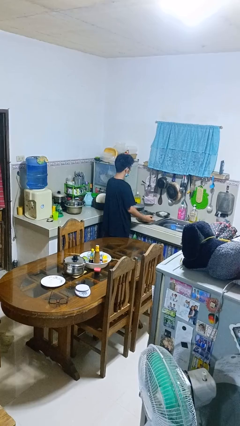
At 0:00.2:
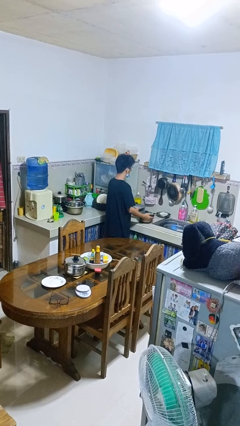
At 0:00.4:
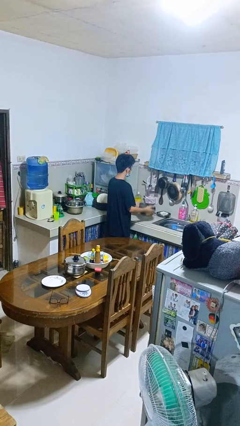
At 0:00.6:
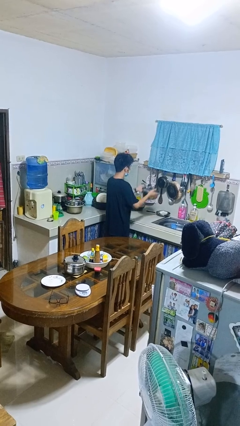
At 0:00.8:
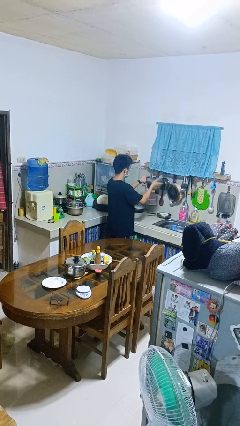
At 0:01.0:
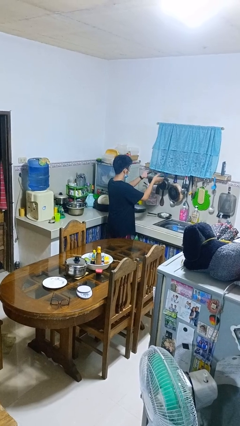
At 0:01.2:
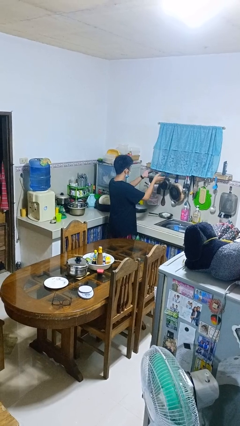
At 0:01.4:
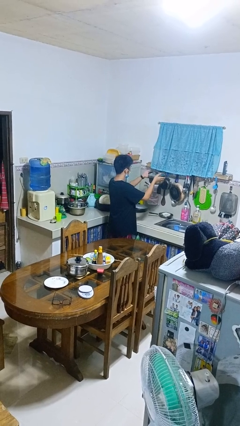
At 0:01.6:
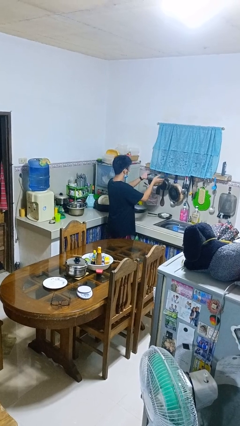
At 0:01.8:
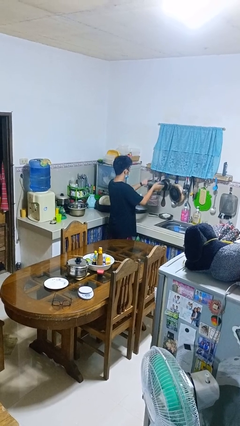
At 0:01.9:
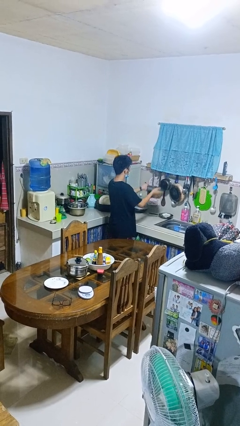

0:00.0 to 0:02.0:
person picks up object from countertop

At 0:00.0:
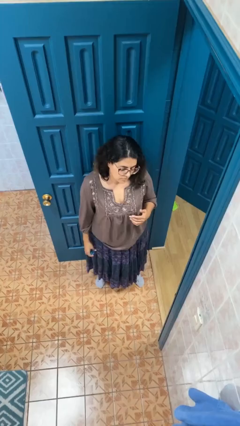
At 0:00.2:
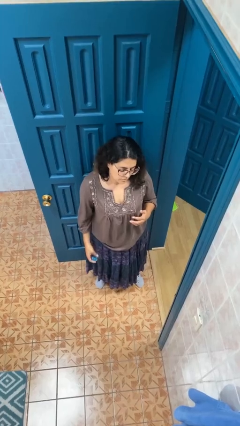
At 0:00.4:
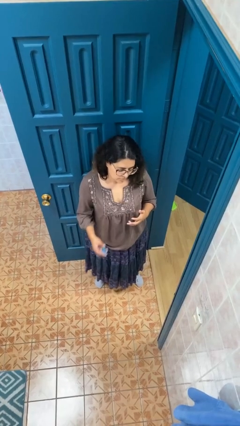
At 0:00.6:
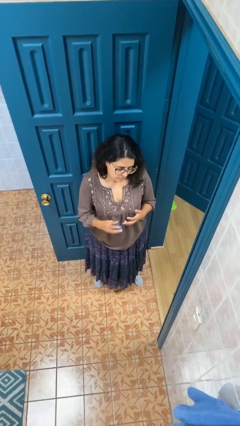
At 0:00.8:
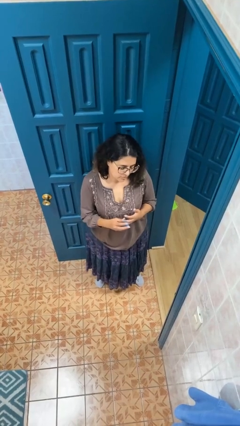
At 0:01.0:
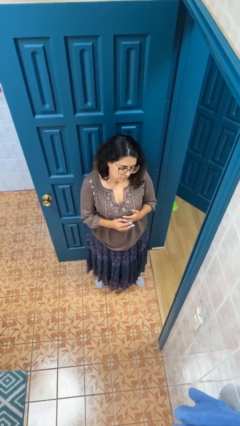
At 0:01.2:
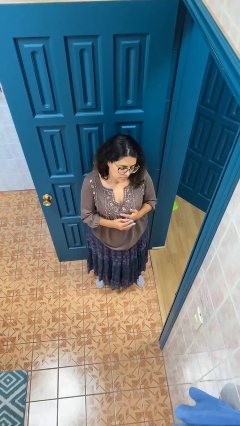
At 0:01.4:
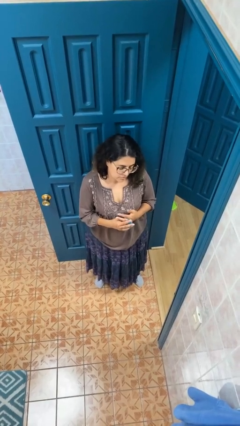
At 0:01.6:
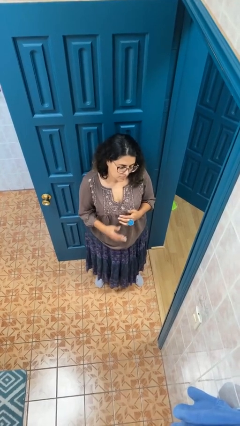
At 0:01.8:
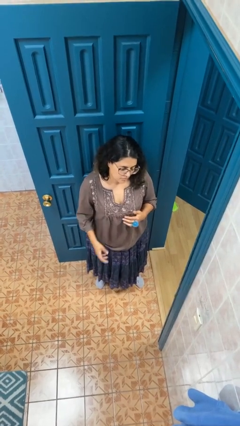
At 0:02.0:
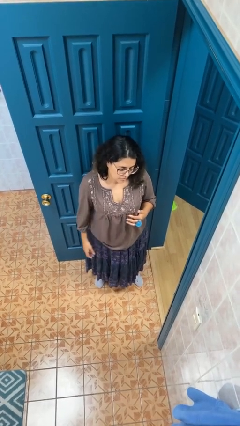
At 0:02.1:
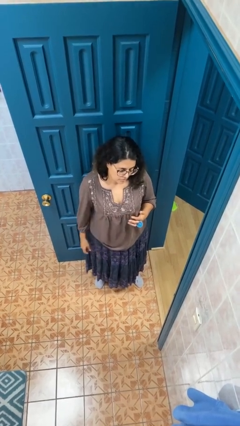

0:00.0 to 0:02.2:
person puts on ring

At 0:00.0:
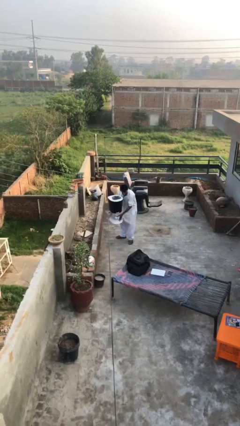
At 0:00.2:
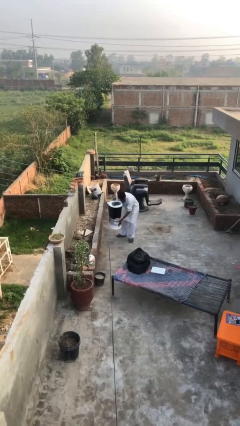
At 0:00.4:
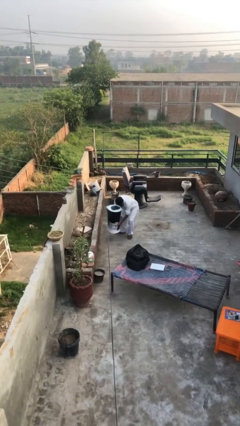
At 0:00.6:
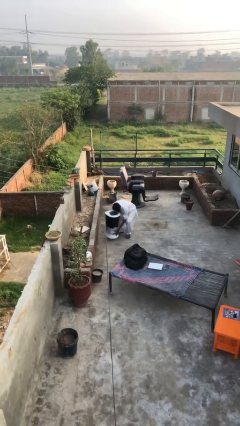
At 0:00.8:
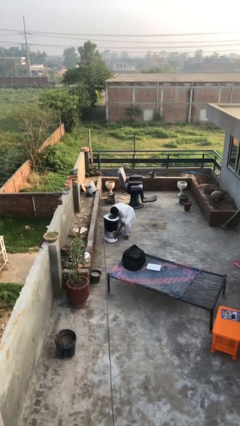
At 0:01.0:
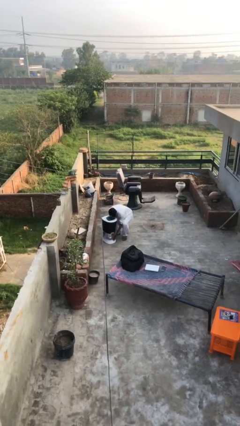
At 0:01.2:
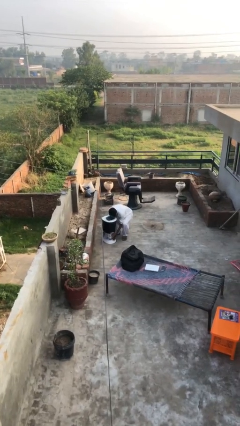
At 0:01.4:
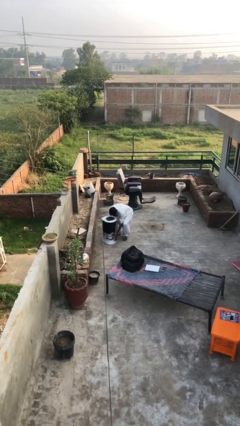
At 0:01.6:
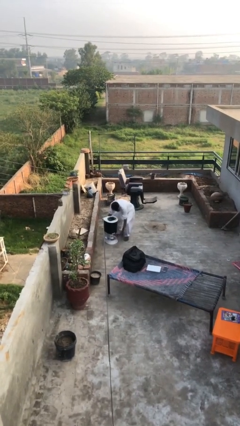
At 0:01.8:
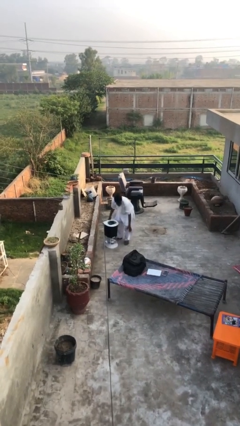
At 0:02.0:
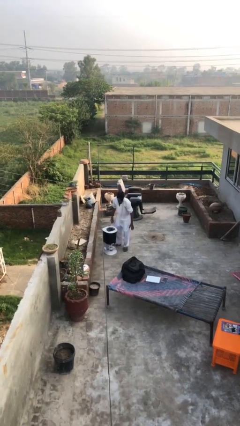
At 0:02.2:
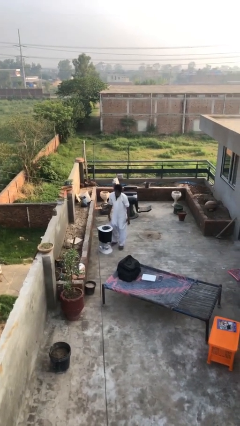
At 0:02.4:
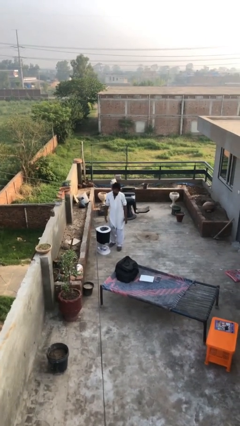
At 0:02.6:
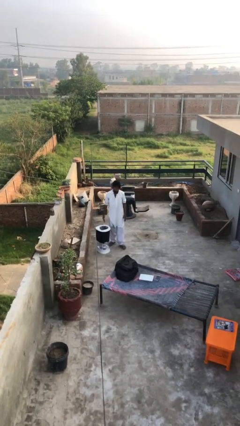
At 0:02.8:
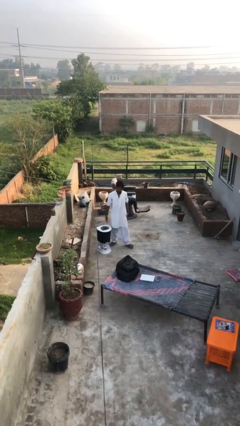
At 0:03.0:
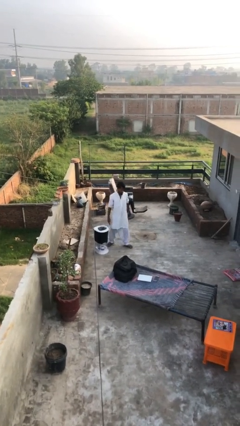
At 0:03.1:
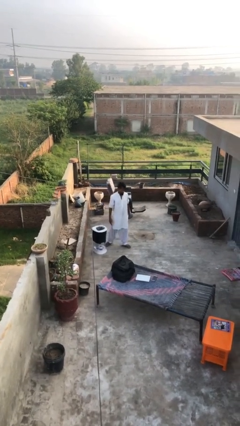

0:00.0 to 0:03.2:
person puts down object on floor

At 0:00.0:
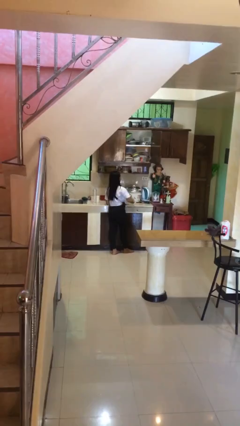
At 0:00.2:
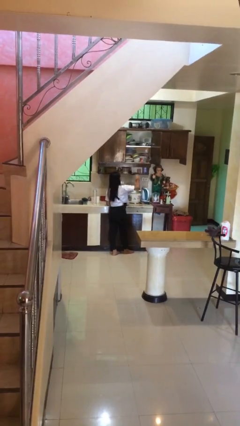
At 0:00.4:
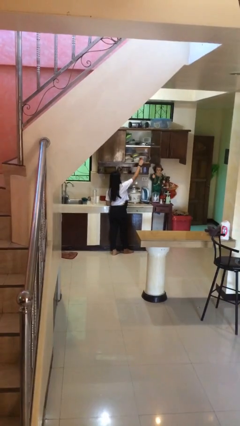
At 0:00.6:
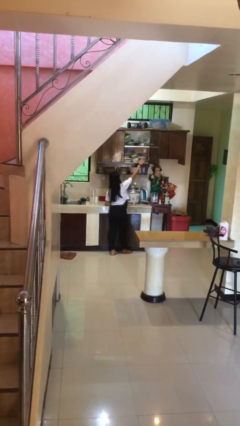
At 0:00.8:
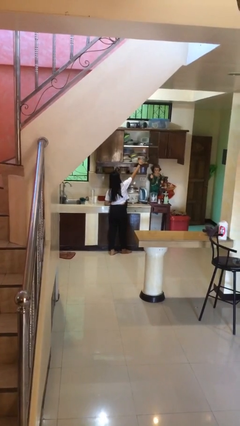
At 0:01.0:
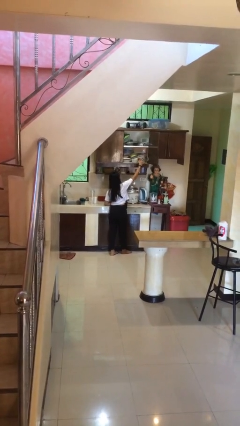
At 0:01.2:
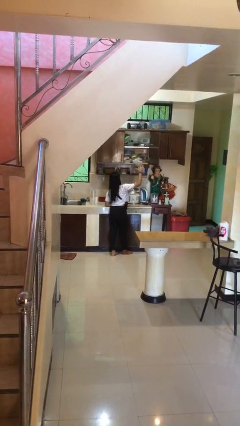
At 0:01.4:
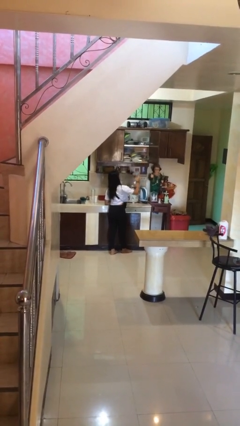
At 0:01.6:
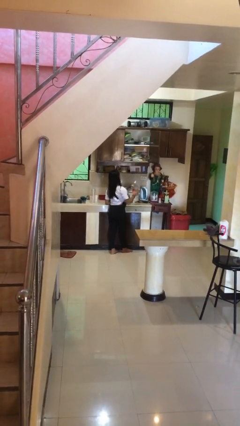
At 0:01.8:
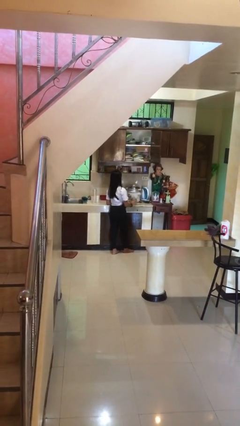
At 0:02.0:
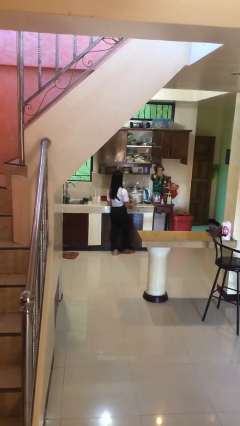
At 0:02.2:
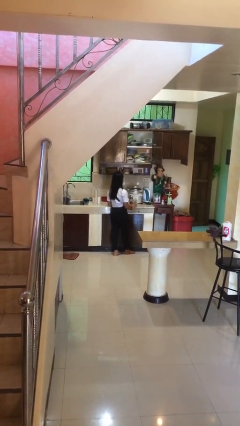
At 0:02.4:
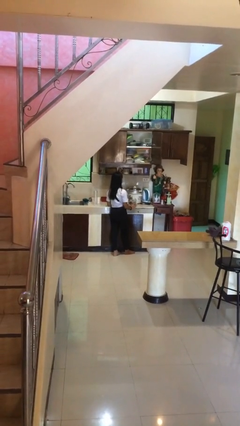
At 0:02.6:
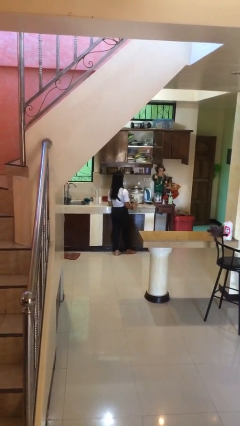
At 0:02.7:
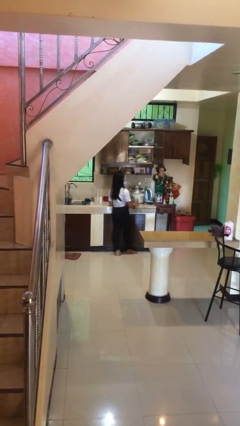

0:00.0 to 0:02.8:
person picks up object from shelf

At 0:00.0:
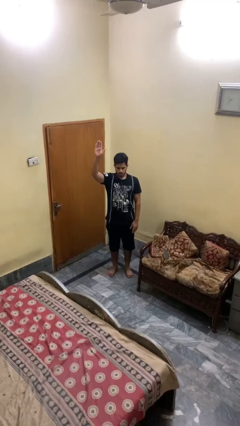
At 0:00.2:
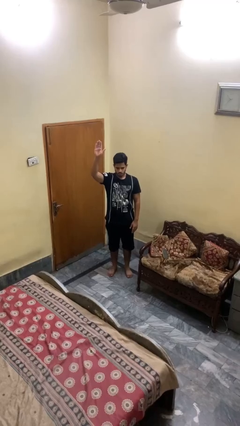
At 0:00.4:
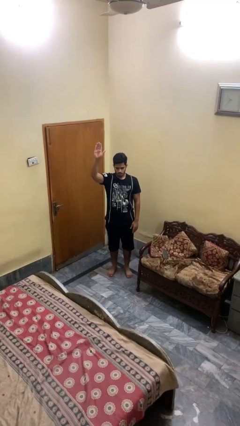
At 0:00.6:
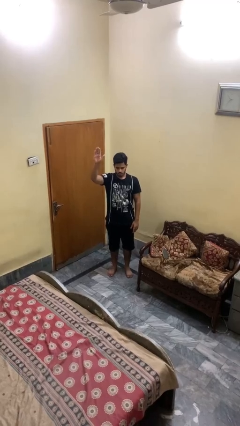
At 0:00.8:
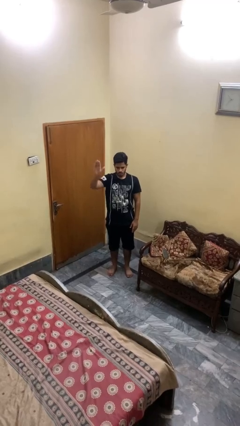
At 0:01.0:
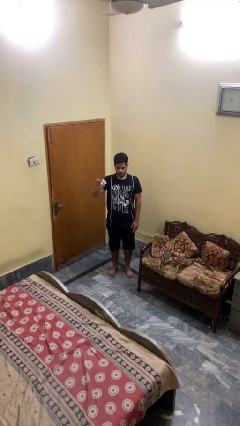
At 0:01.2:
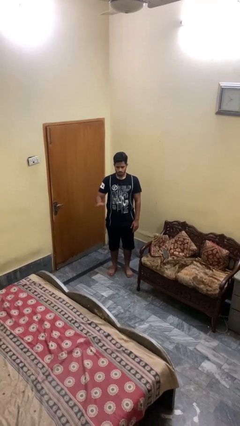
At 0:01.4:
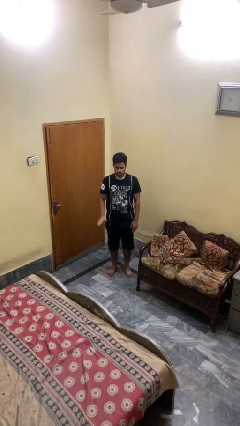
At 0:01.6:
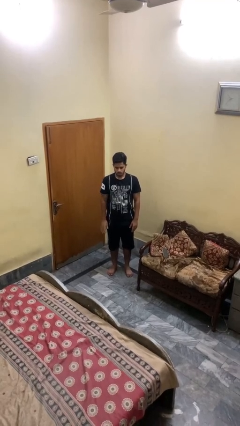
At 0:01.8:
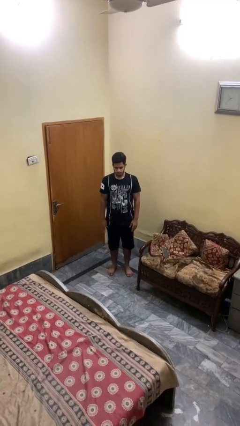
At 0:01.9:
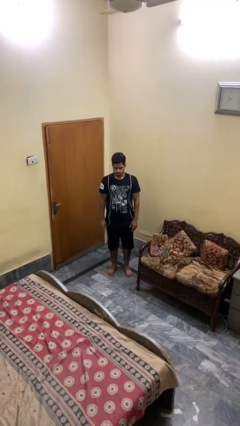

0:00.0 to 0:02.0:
person gestures lower hand

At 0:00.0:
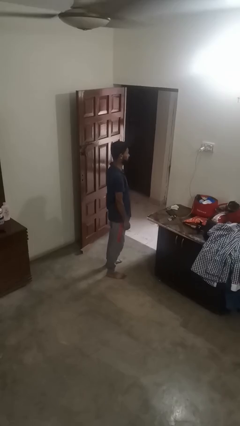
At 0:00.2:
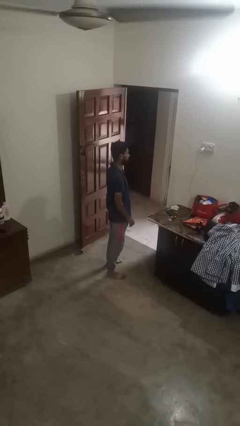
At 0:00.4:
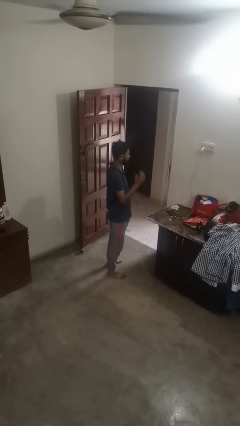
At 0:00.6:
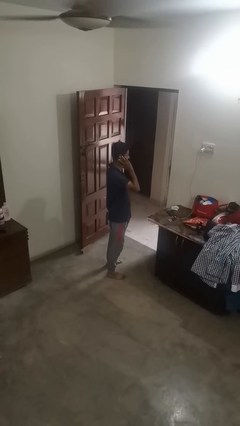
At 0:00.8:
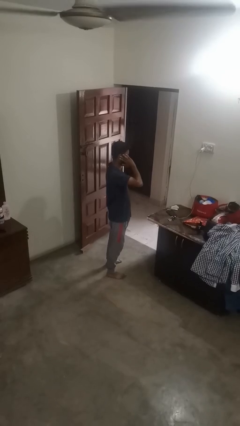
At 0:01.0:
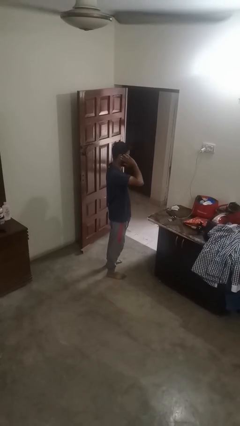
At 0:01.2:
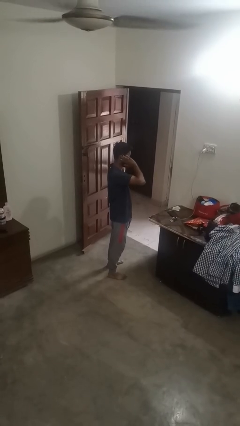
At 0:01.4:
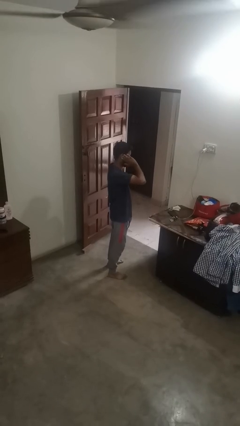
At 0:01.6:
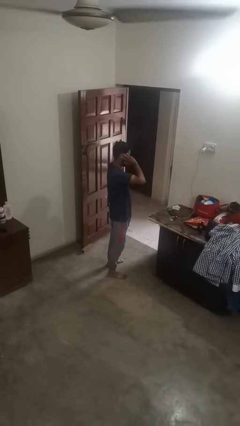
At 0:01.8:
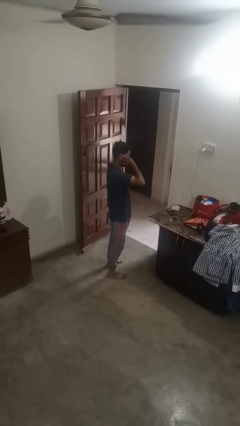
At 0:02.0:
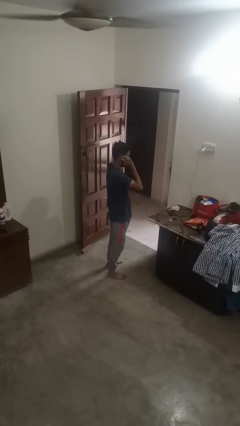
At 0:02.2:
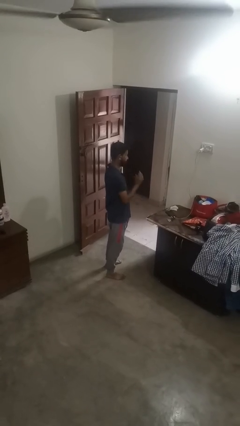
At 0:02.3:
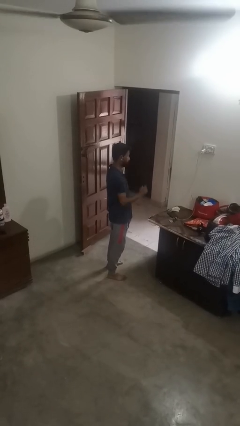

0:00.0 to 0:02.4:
person touches earlobe

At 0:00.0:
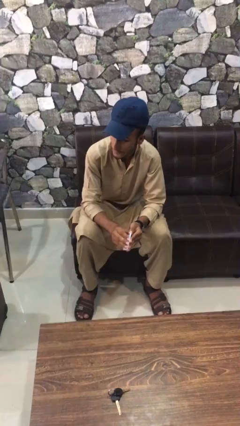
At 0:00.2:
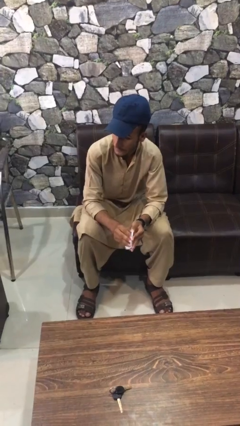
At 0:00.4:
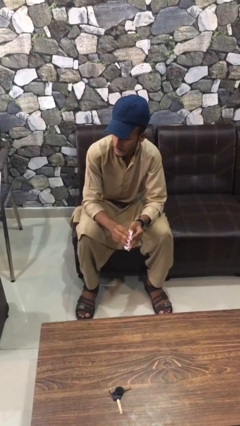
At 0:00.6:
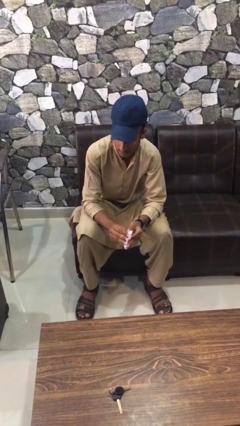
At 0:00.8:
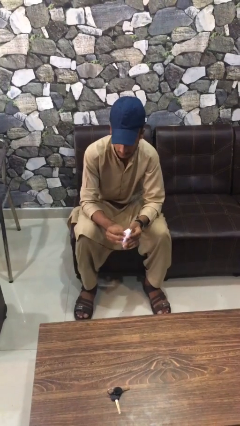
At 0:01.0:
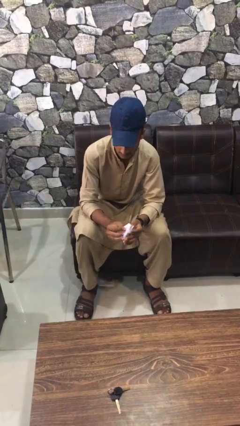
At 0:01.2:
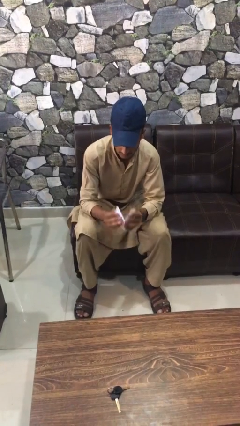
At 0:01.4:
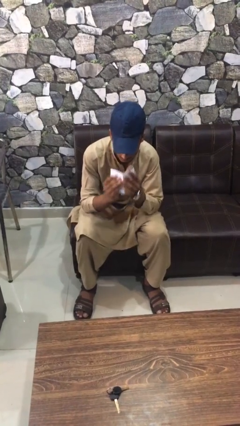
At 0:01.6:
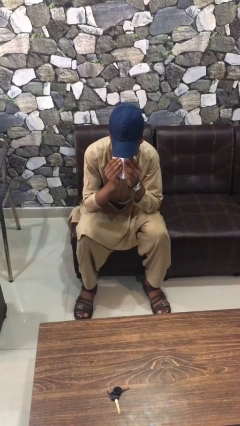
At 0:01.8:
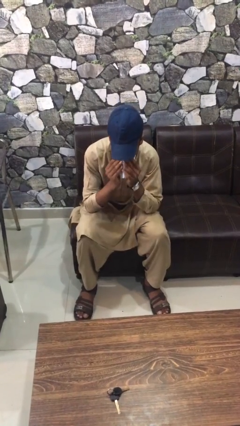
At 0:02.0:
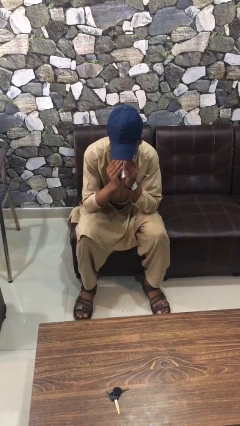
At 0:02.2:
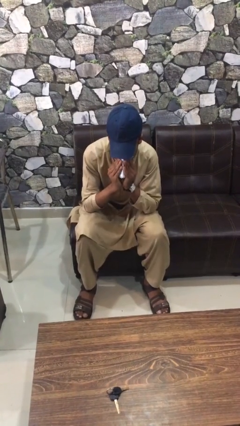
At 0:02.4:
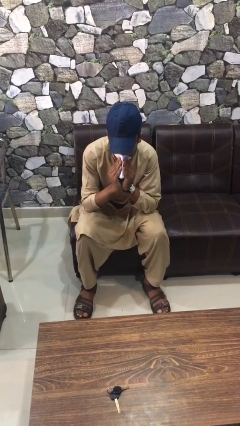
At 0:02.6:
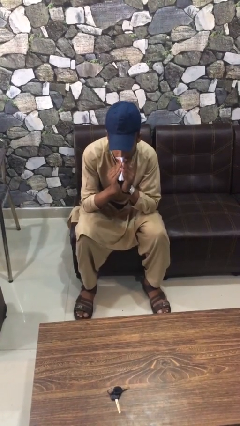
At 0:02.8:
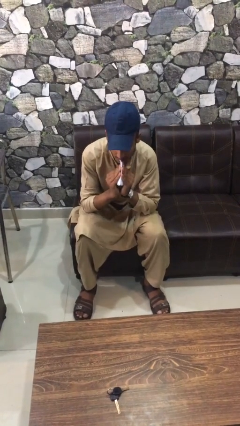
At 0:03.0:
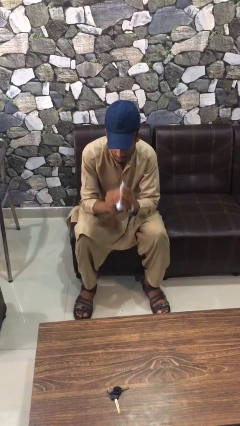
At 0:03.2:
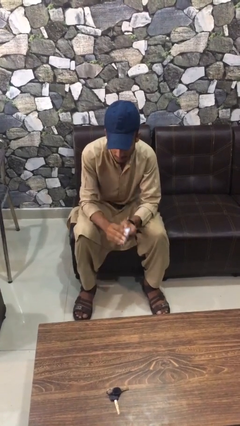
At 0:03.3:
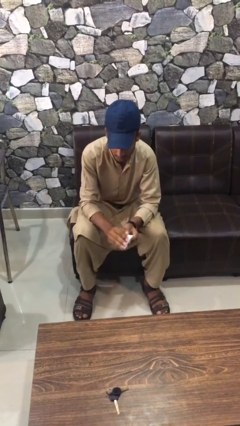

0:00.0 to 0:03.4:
person blows nose
